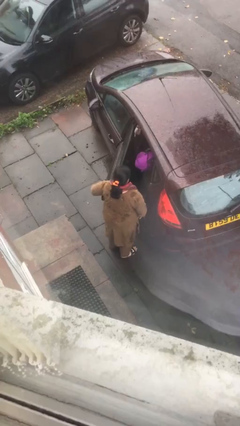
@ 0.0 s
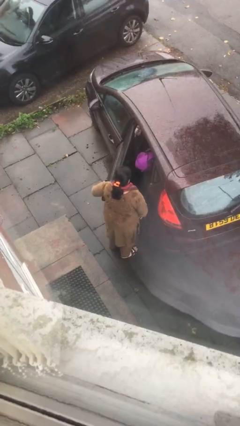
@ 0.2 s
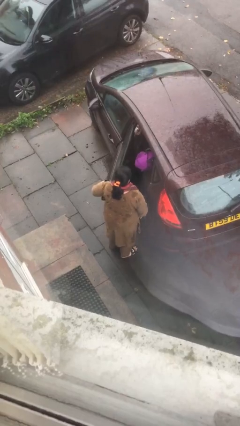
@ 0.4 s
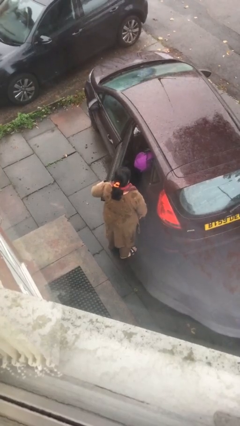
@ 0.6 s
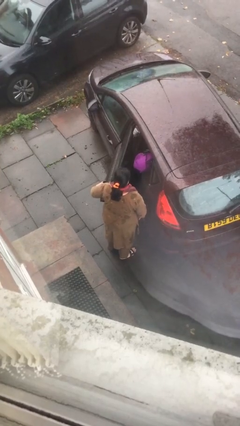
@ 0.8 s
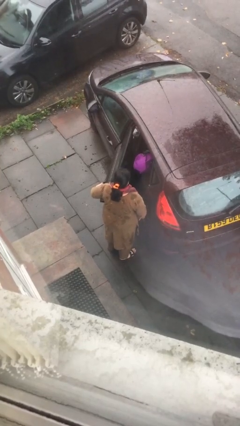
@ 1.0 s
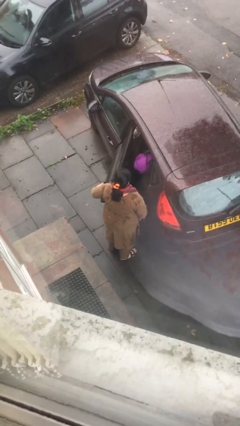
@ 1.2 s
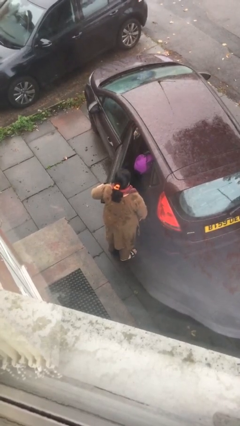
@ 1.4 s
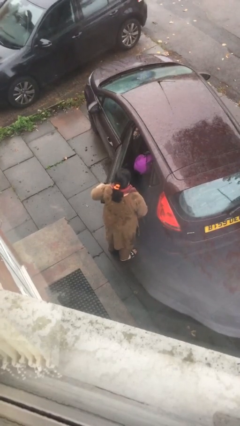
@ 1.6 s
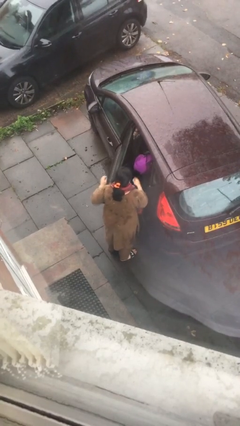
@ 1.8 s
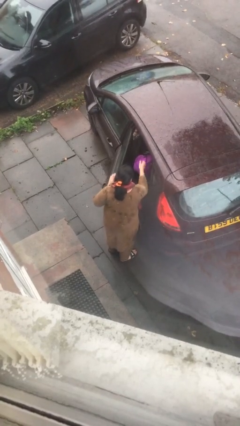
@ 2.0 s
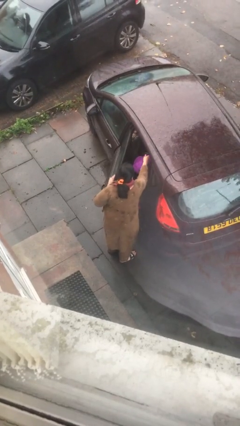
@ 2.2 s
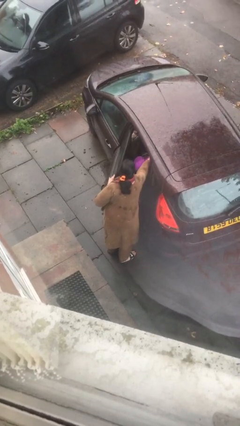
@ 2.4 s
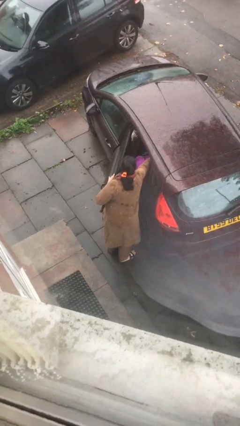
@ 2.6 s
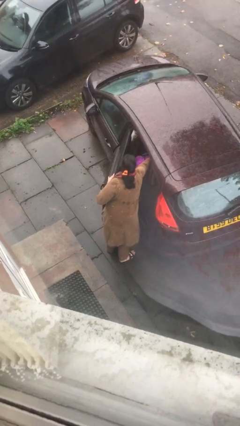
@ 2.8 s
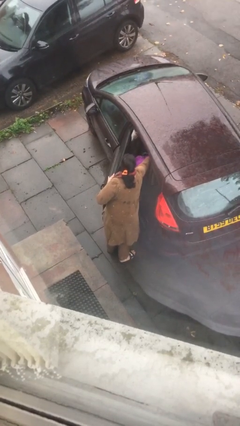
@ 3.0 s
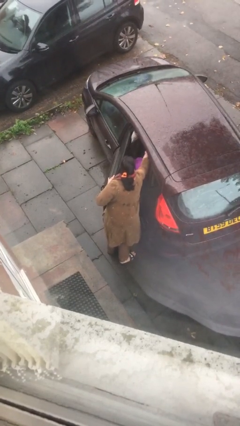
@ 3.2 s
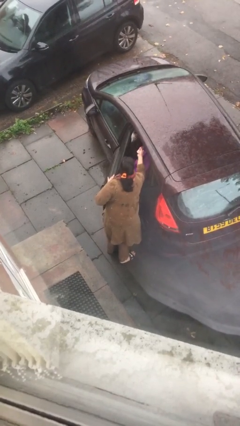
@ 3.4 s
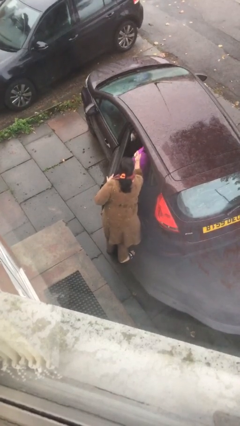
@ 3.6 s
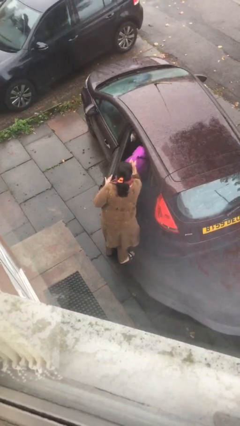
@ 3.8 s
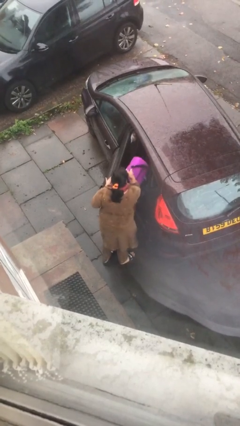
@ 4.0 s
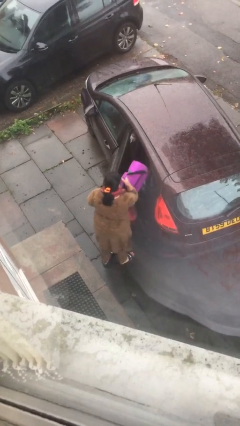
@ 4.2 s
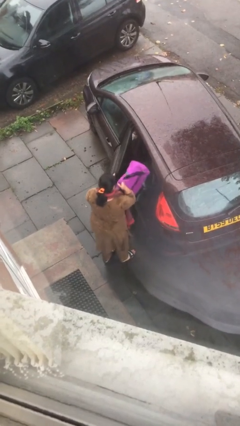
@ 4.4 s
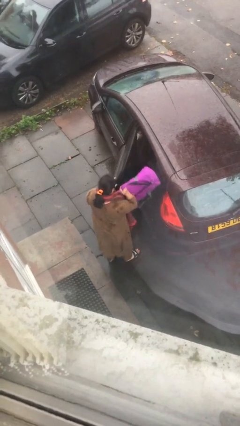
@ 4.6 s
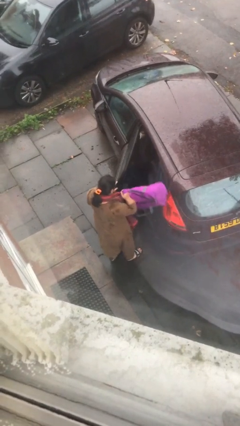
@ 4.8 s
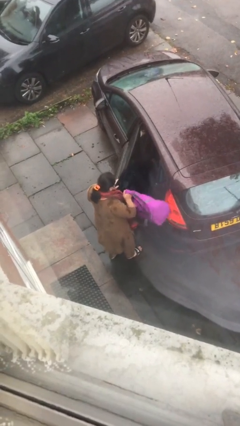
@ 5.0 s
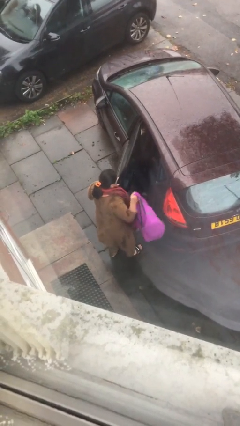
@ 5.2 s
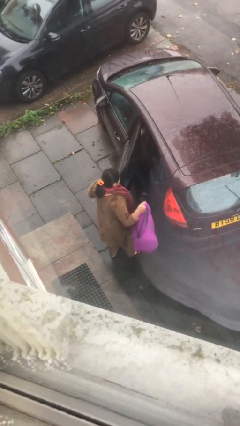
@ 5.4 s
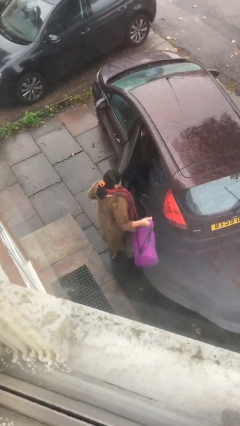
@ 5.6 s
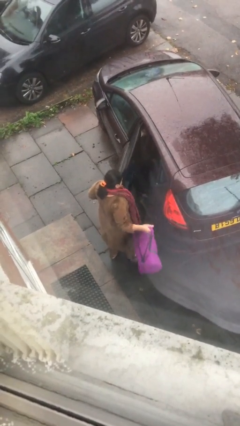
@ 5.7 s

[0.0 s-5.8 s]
person unloads car

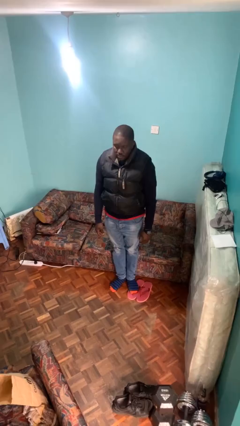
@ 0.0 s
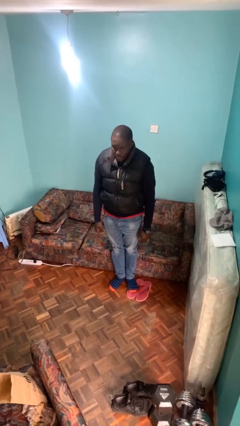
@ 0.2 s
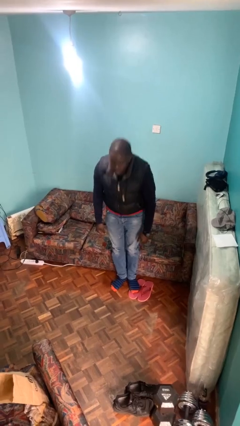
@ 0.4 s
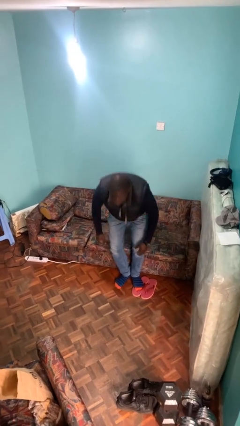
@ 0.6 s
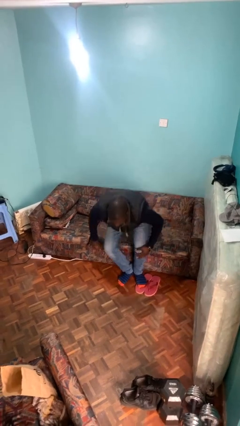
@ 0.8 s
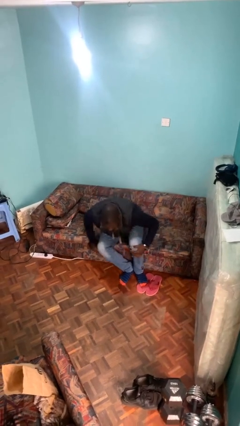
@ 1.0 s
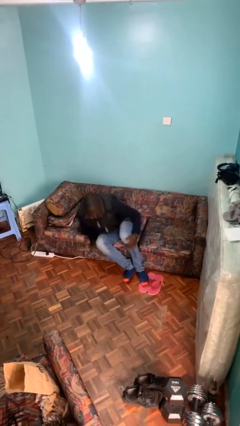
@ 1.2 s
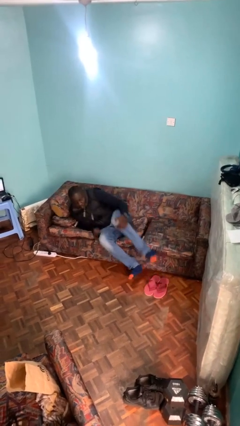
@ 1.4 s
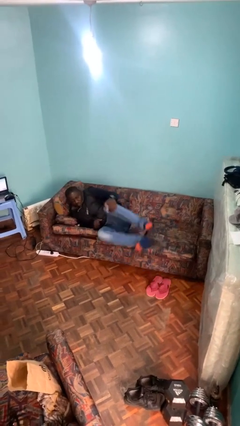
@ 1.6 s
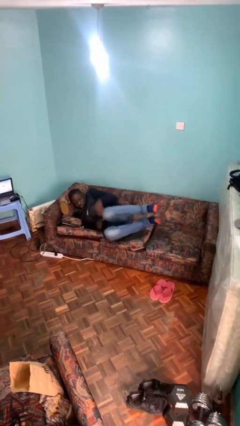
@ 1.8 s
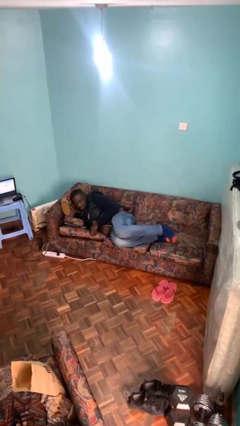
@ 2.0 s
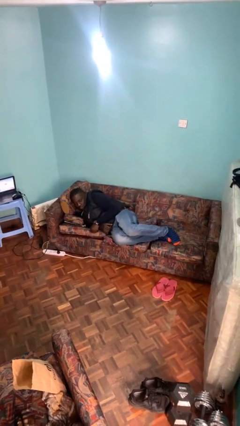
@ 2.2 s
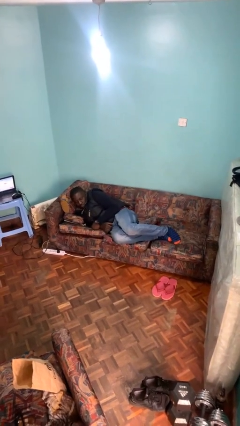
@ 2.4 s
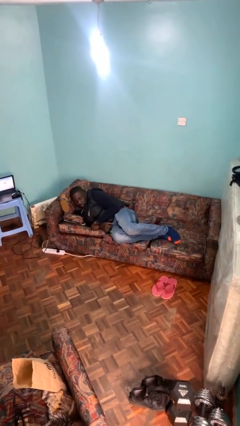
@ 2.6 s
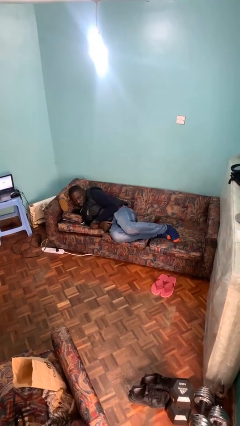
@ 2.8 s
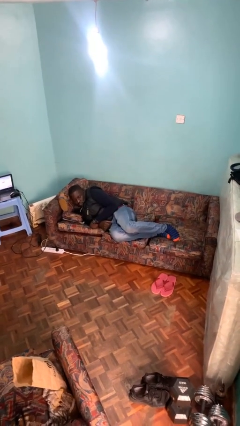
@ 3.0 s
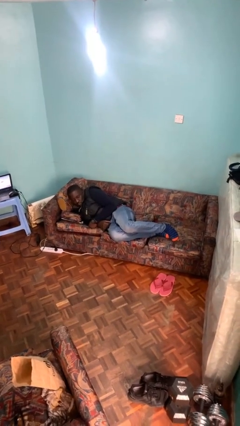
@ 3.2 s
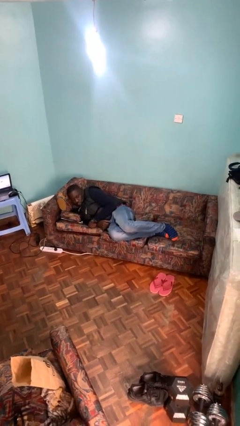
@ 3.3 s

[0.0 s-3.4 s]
person lies down on couch

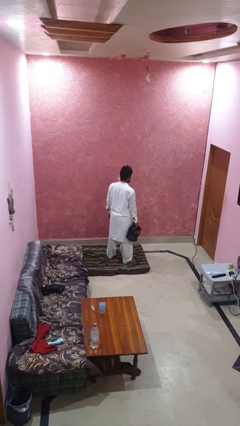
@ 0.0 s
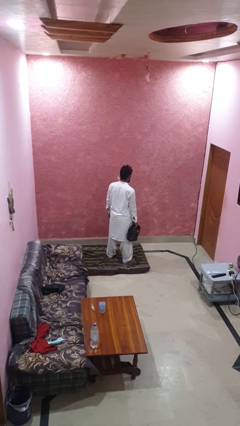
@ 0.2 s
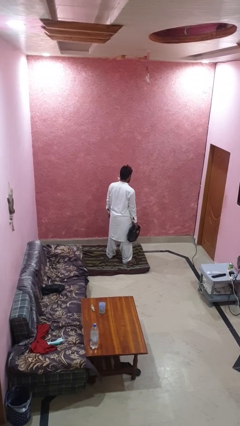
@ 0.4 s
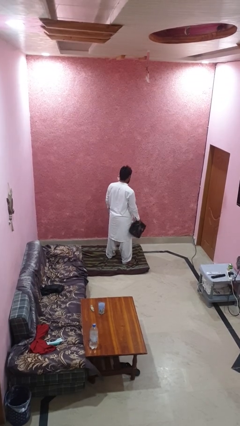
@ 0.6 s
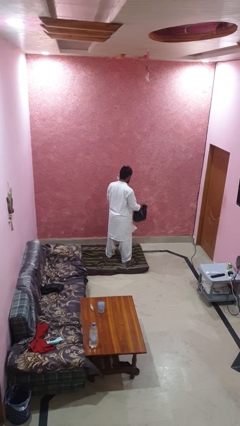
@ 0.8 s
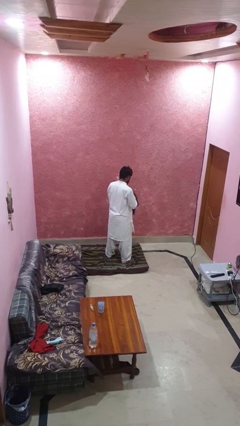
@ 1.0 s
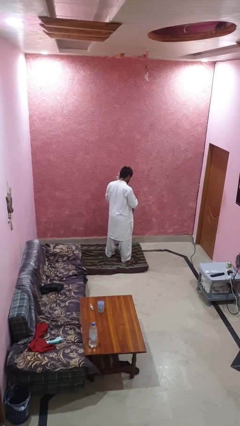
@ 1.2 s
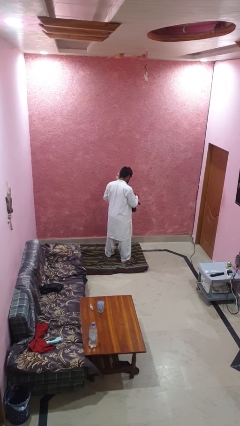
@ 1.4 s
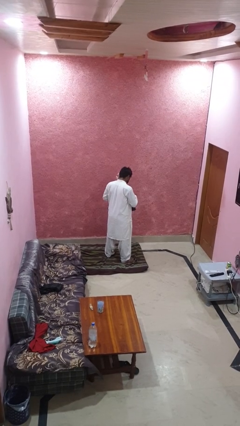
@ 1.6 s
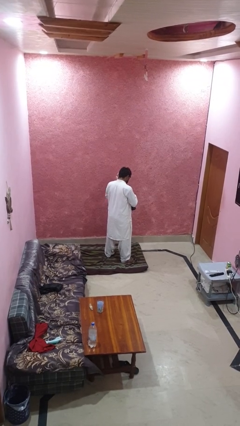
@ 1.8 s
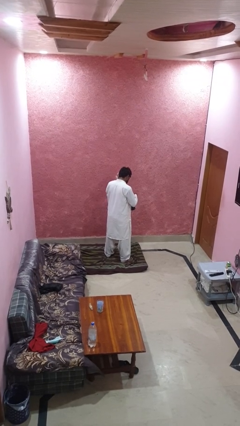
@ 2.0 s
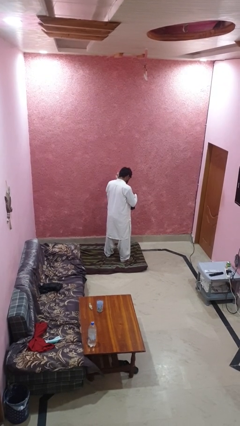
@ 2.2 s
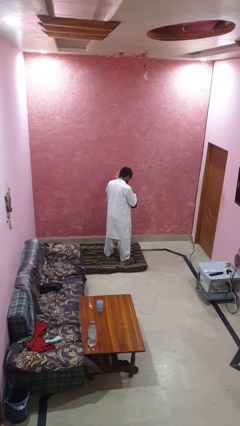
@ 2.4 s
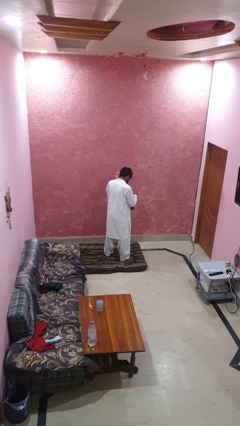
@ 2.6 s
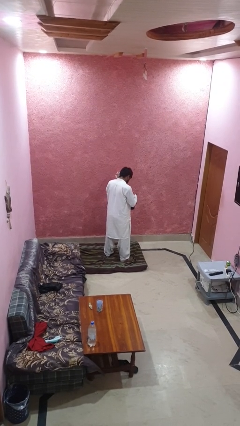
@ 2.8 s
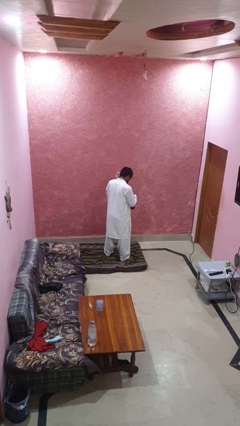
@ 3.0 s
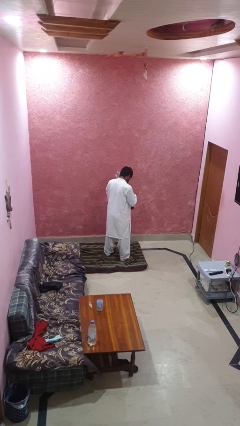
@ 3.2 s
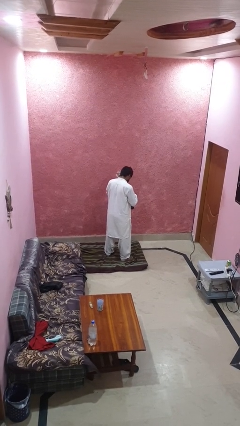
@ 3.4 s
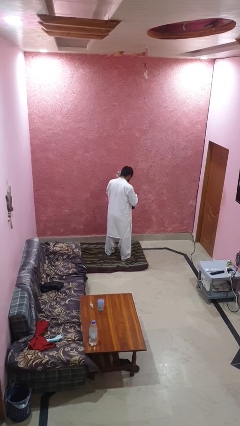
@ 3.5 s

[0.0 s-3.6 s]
person searches in purse

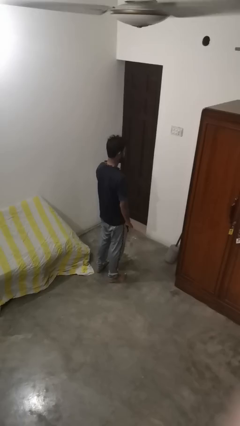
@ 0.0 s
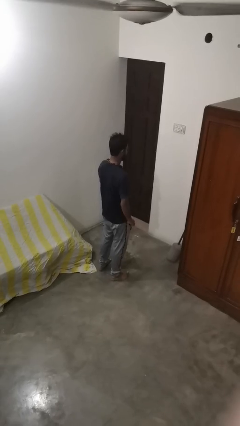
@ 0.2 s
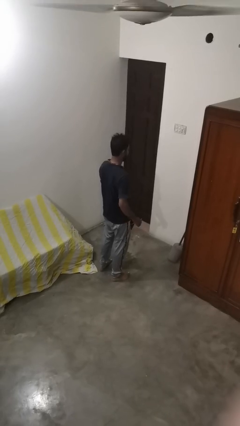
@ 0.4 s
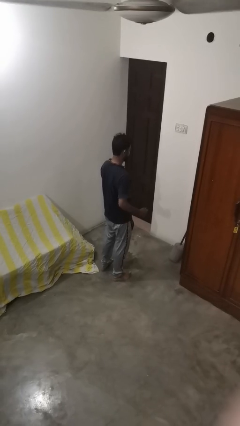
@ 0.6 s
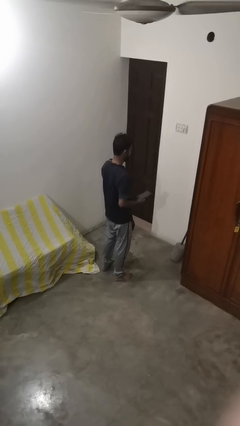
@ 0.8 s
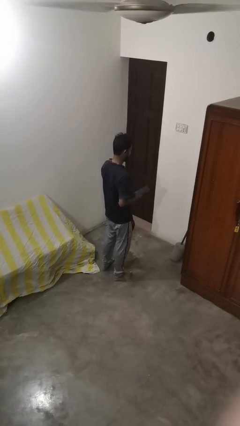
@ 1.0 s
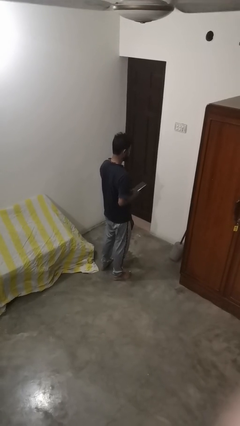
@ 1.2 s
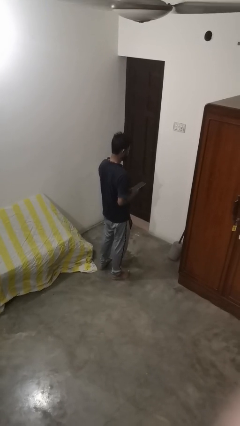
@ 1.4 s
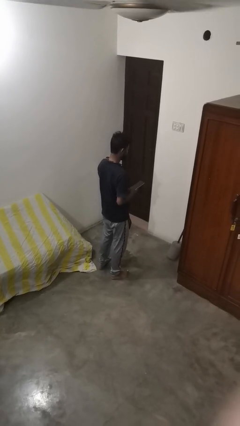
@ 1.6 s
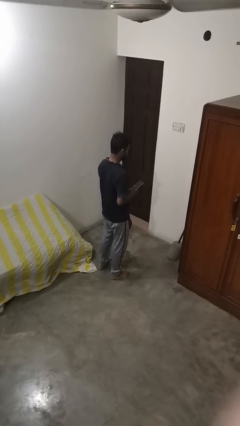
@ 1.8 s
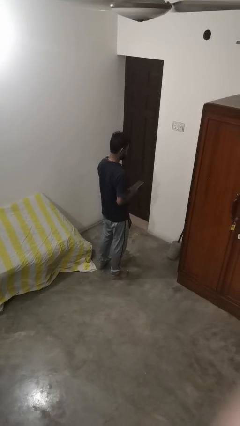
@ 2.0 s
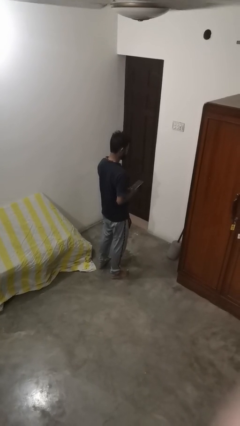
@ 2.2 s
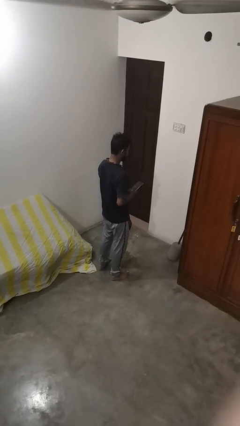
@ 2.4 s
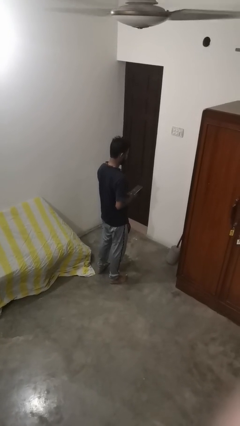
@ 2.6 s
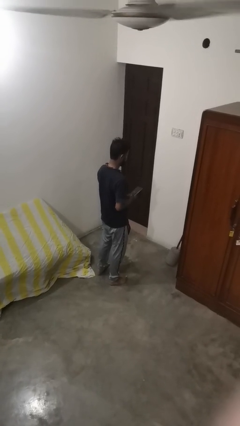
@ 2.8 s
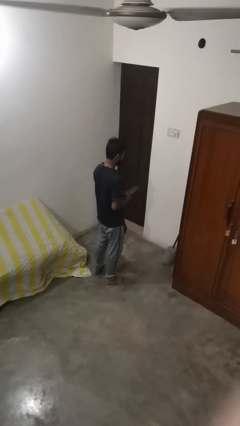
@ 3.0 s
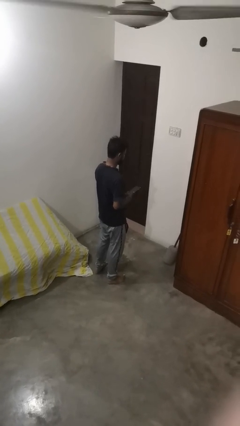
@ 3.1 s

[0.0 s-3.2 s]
person takes phone from pocket

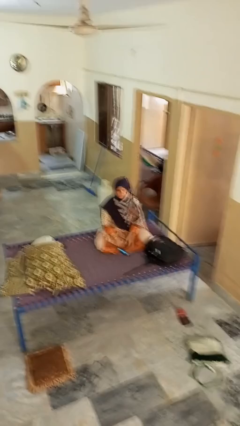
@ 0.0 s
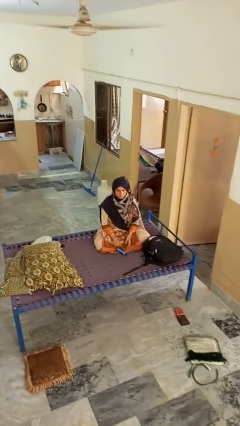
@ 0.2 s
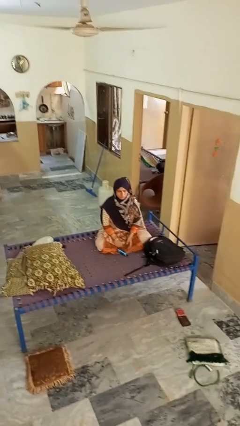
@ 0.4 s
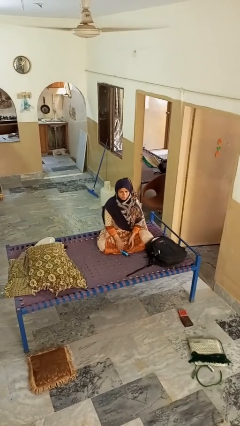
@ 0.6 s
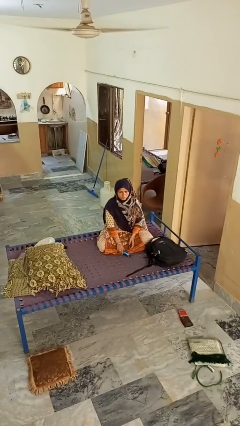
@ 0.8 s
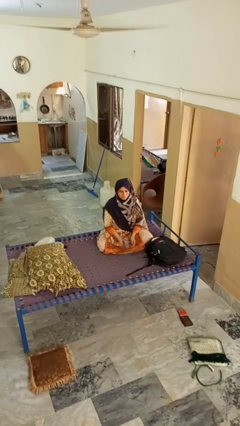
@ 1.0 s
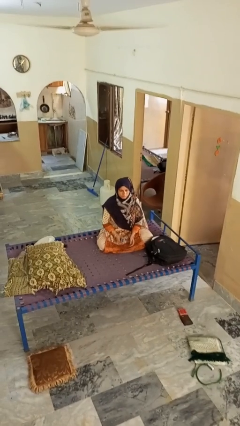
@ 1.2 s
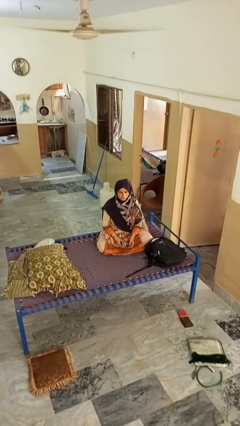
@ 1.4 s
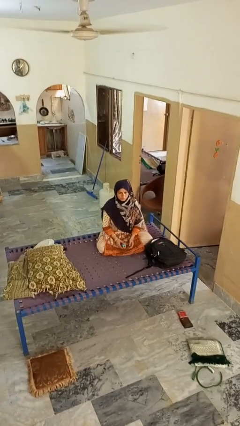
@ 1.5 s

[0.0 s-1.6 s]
person picks up object from floor
